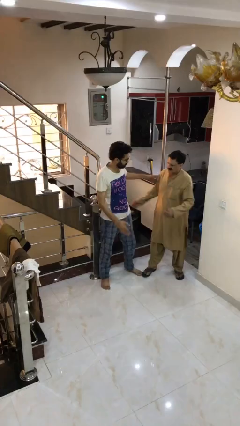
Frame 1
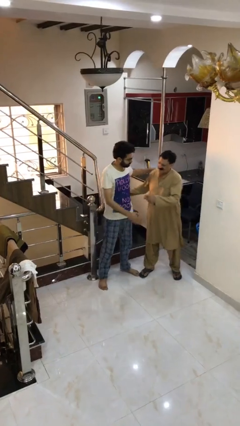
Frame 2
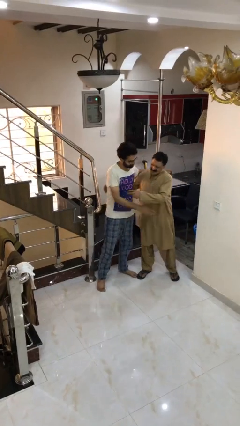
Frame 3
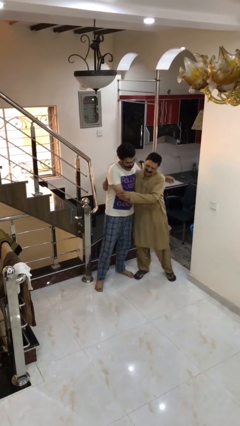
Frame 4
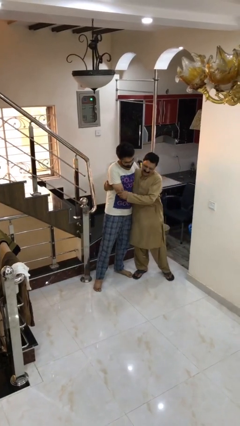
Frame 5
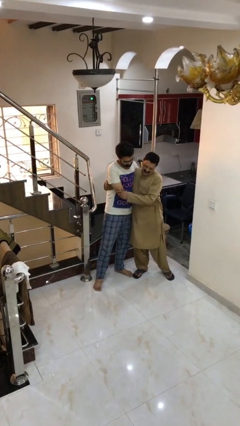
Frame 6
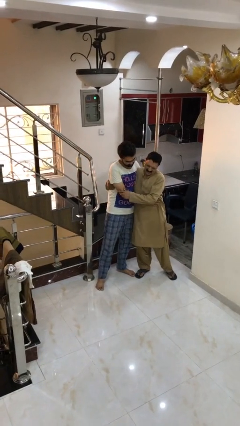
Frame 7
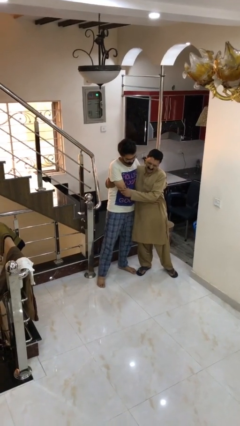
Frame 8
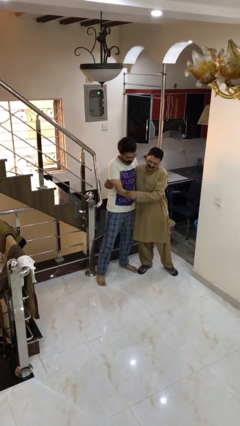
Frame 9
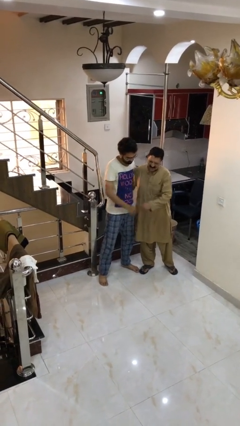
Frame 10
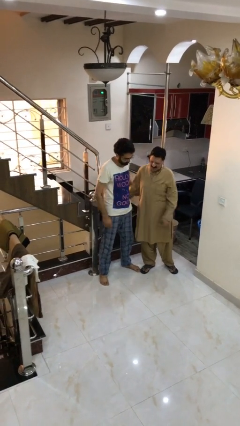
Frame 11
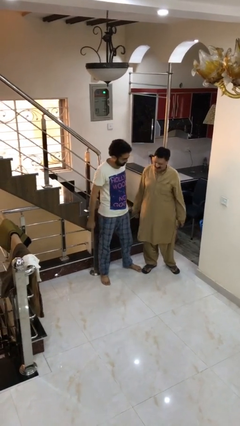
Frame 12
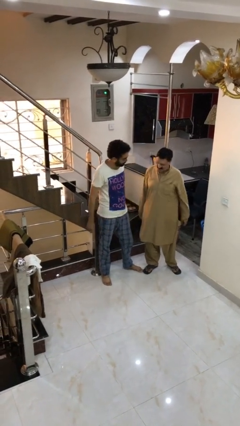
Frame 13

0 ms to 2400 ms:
person embraces person

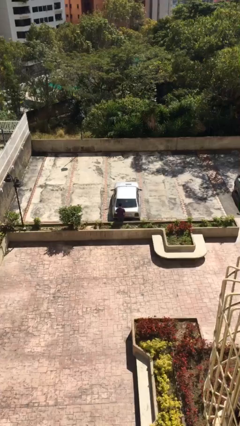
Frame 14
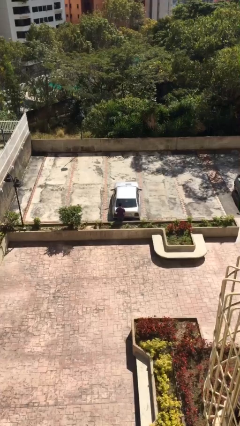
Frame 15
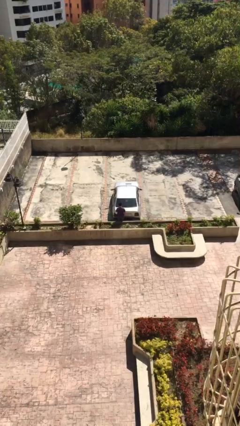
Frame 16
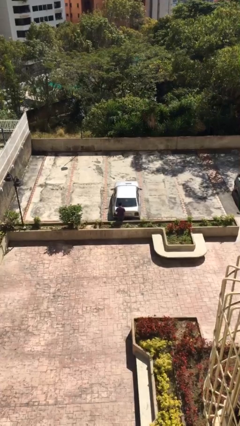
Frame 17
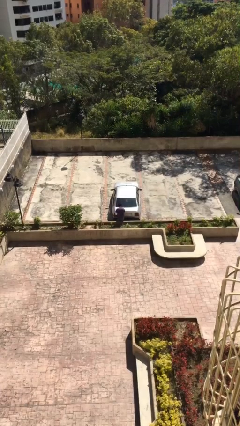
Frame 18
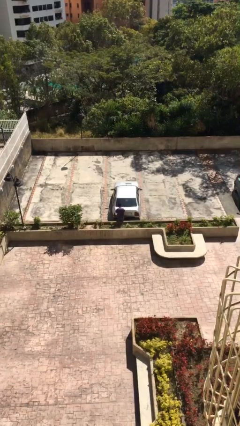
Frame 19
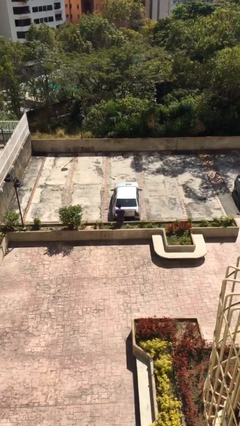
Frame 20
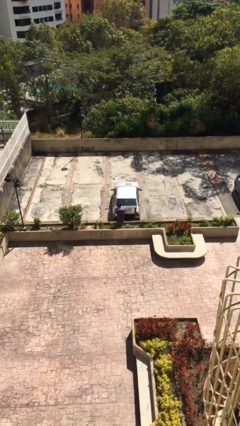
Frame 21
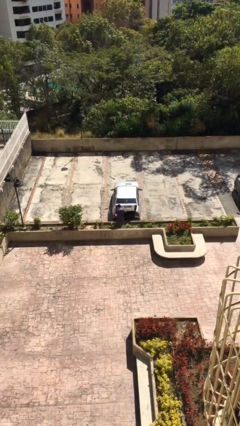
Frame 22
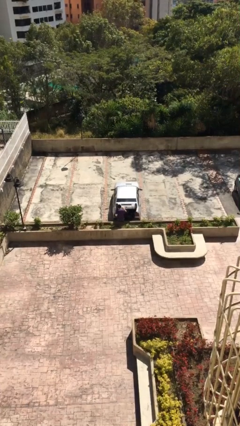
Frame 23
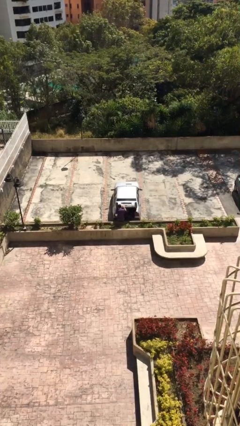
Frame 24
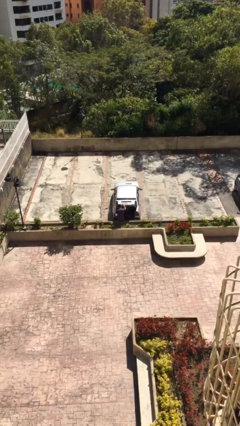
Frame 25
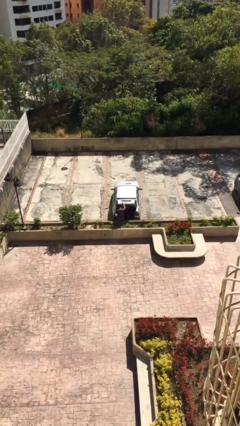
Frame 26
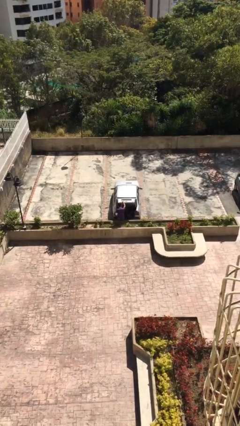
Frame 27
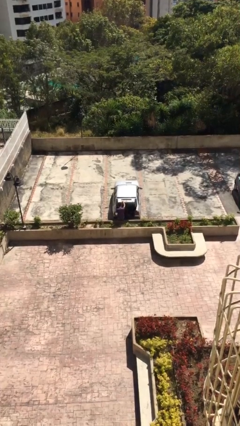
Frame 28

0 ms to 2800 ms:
person opens car trunk

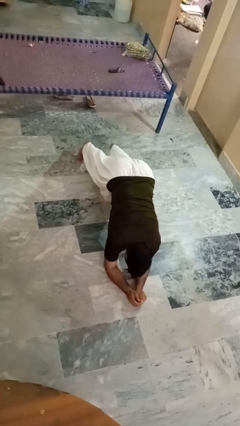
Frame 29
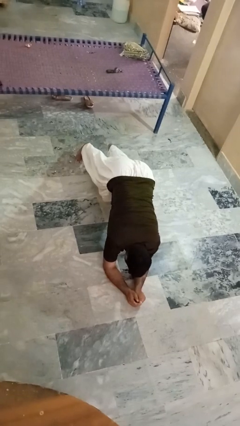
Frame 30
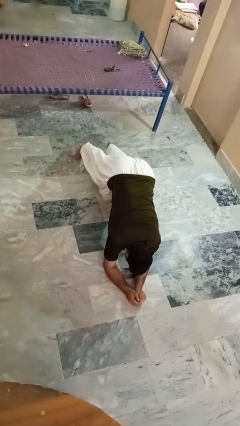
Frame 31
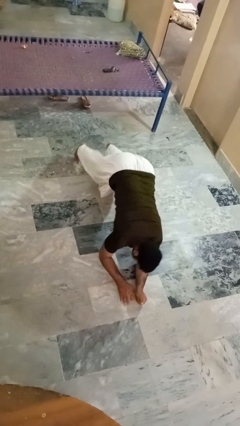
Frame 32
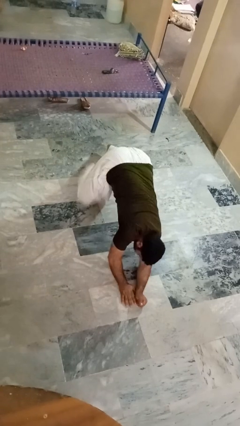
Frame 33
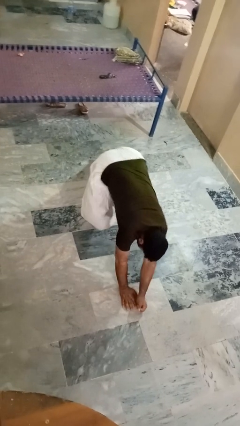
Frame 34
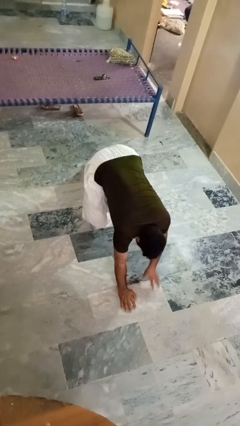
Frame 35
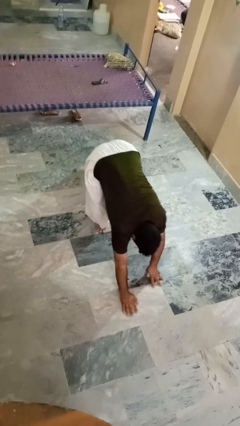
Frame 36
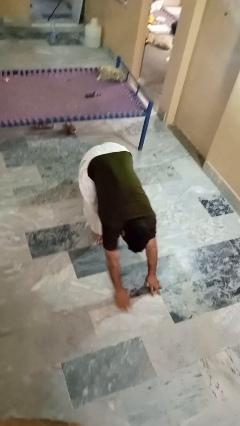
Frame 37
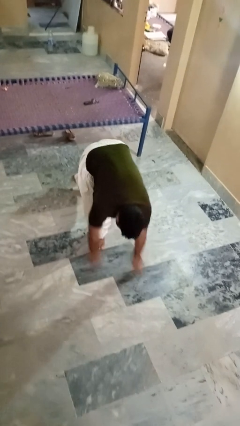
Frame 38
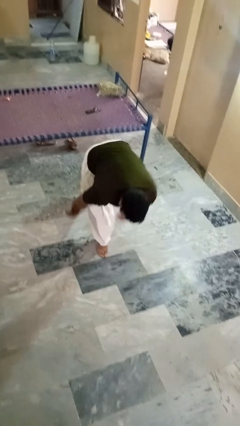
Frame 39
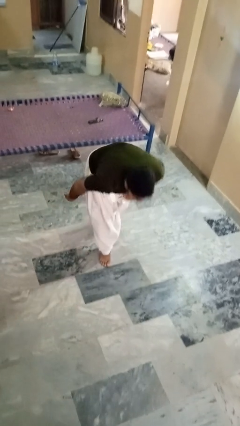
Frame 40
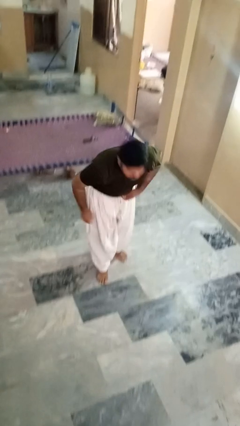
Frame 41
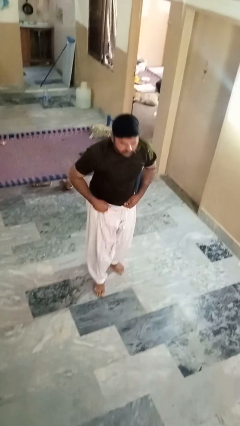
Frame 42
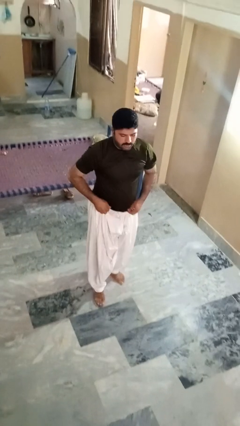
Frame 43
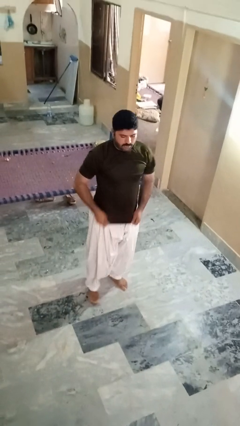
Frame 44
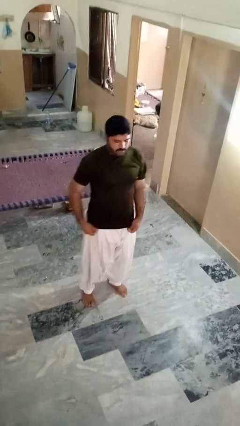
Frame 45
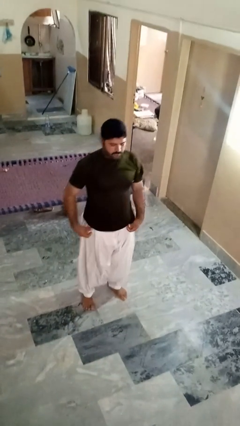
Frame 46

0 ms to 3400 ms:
person stands up from floor

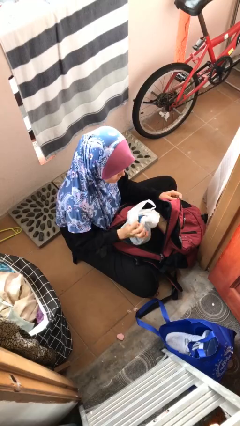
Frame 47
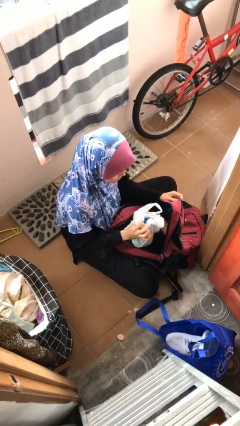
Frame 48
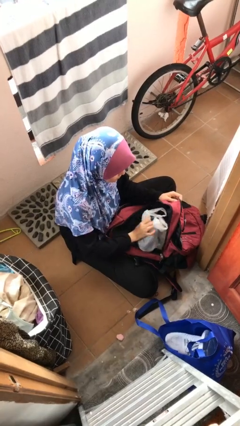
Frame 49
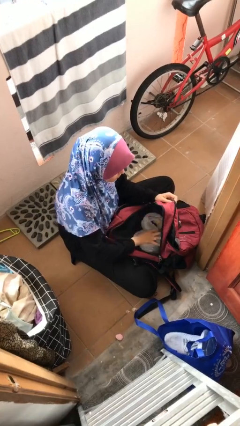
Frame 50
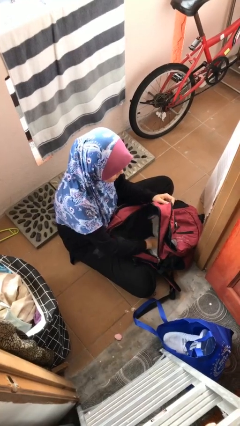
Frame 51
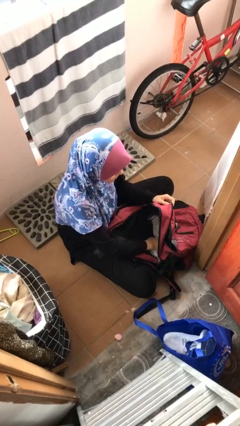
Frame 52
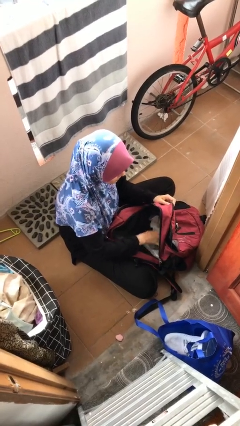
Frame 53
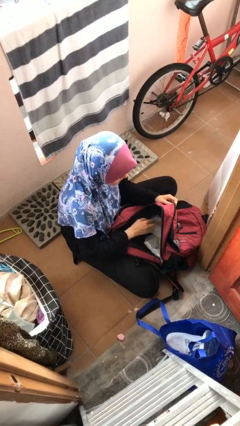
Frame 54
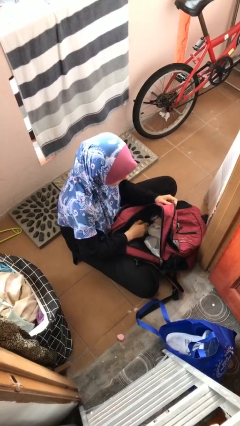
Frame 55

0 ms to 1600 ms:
person puts object into backpack

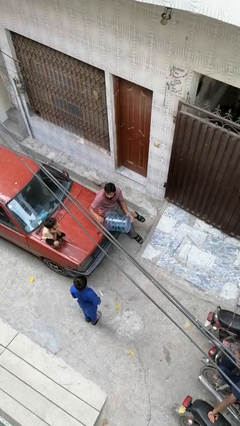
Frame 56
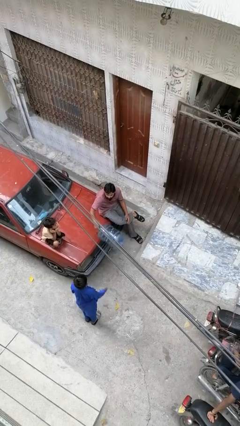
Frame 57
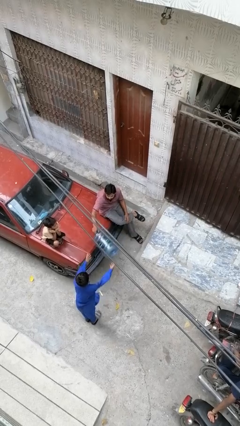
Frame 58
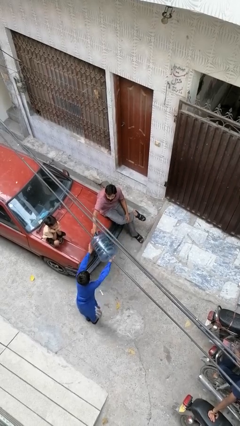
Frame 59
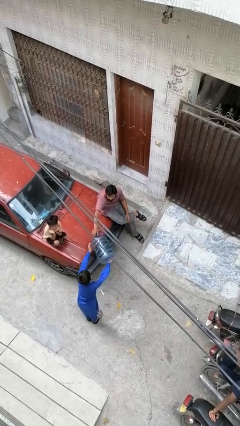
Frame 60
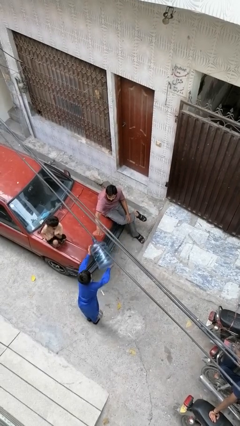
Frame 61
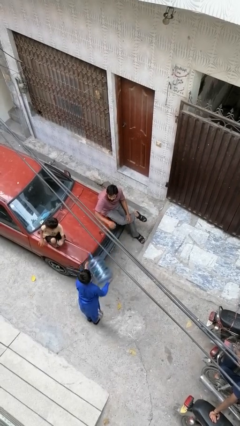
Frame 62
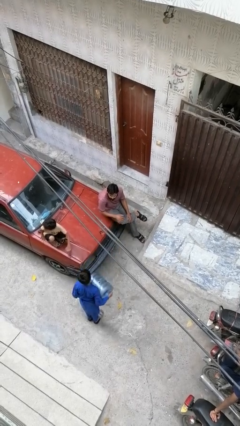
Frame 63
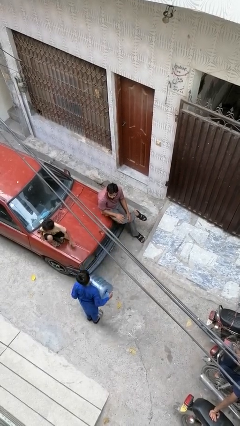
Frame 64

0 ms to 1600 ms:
person transfers object to person

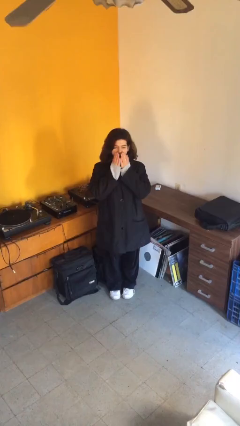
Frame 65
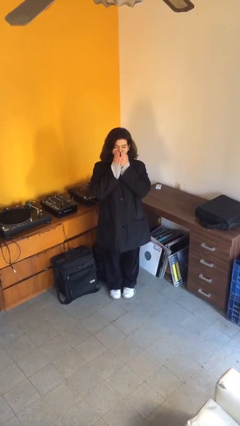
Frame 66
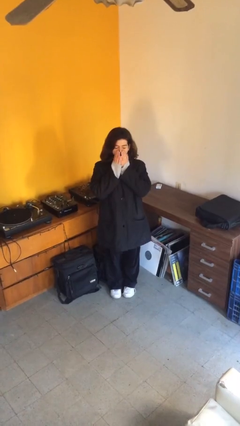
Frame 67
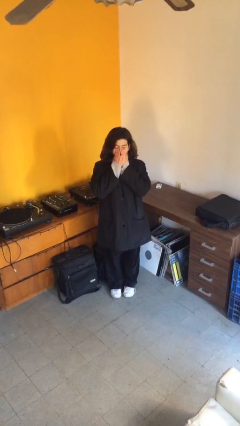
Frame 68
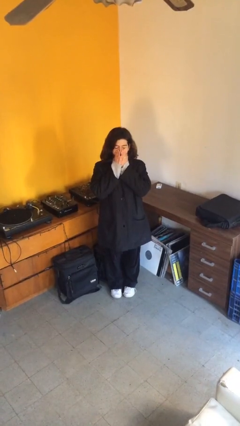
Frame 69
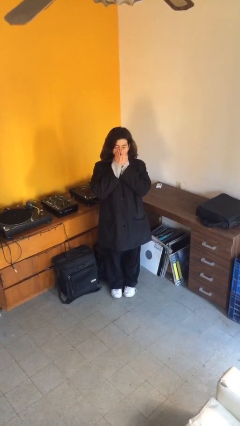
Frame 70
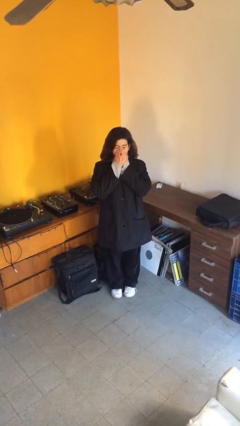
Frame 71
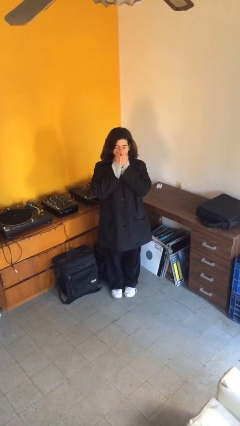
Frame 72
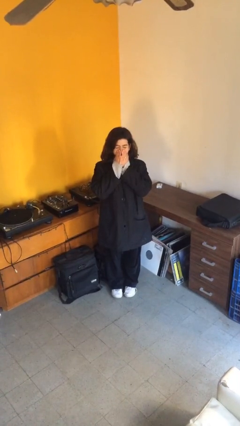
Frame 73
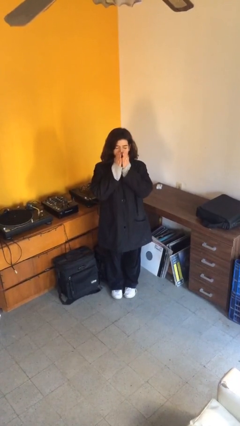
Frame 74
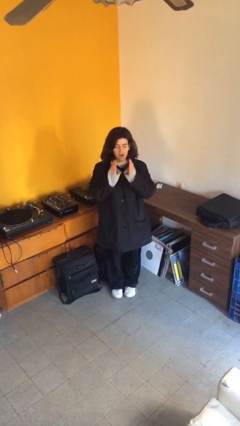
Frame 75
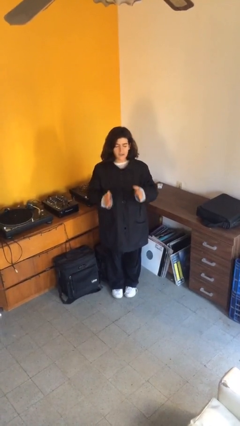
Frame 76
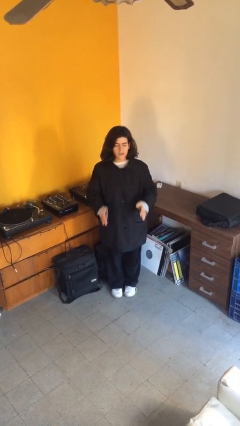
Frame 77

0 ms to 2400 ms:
person yawns

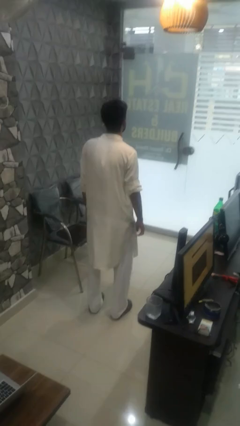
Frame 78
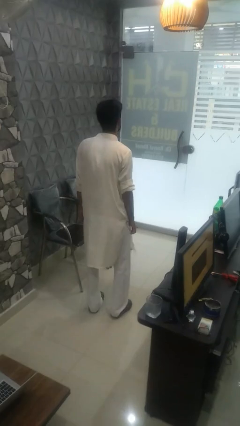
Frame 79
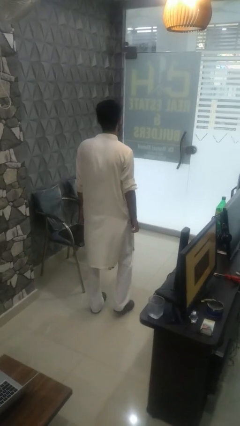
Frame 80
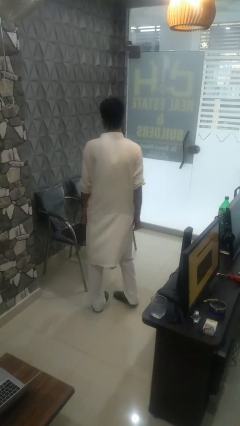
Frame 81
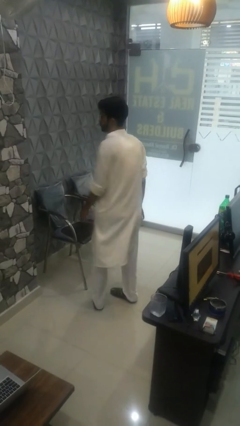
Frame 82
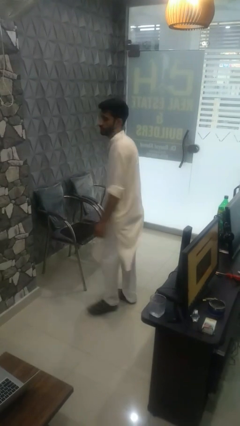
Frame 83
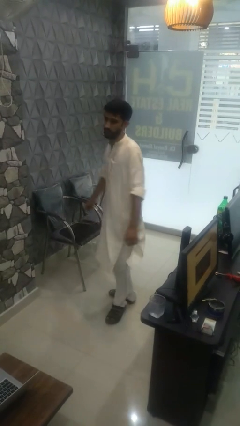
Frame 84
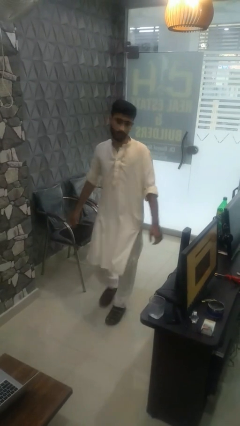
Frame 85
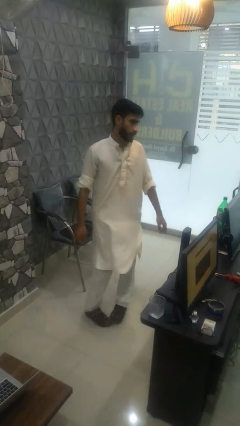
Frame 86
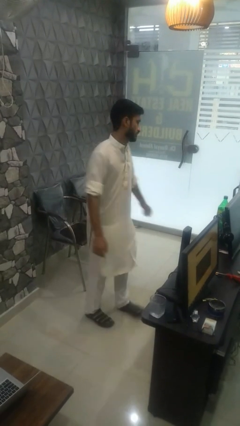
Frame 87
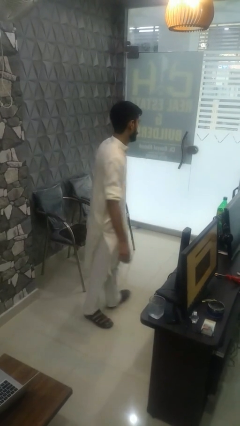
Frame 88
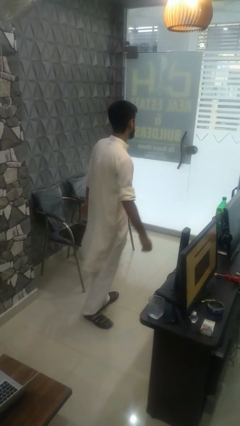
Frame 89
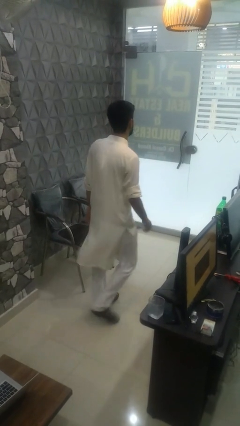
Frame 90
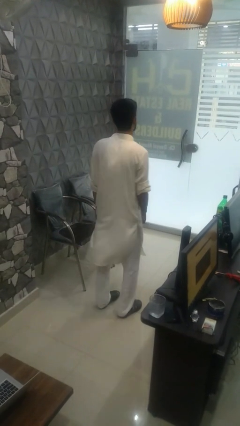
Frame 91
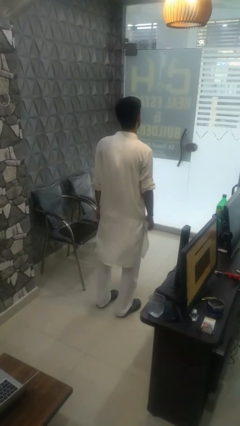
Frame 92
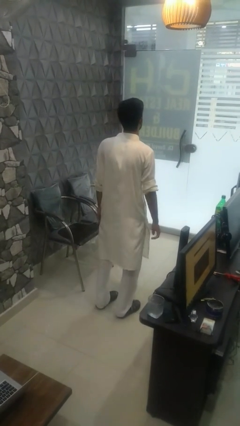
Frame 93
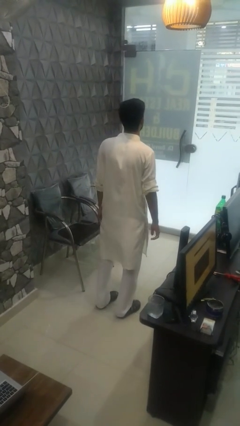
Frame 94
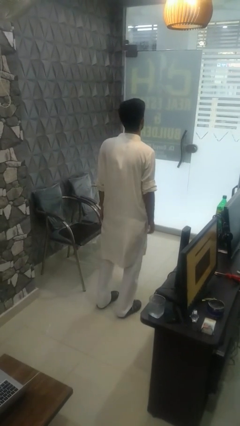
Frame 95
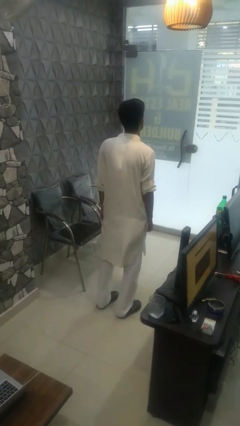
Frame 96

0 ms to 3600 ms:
person twirls
